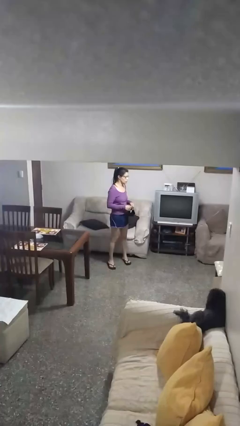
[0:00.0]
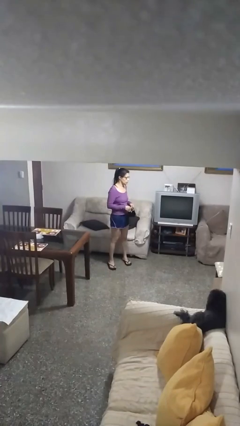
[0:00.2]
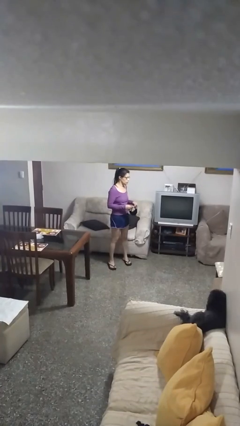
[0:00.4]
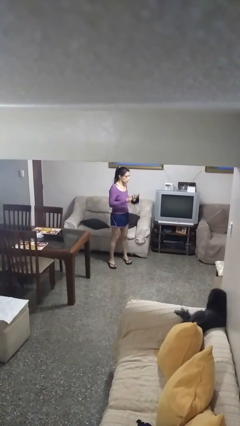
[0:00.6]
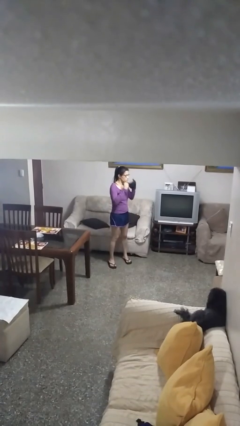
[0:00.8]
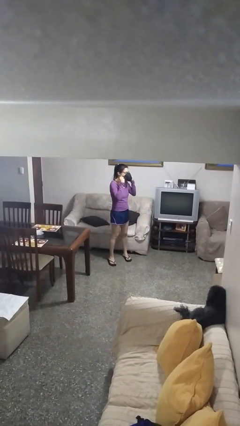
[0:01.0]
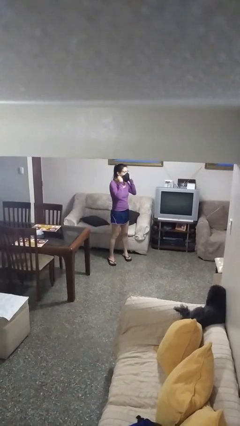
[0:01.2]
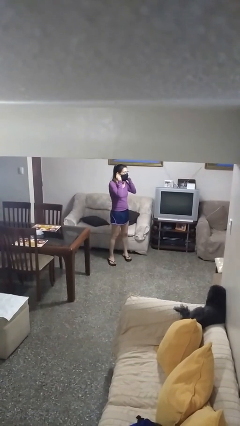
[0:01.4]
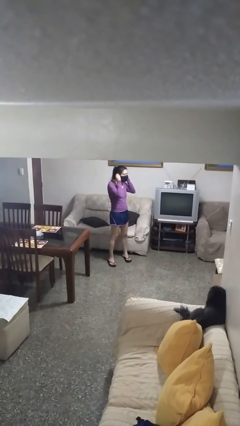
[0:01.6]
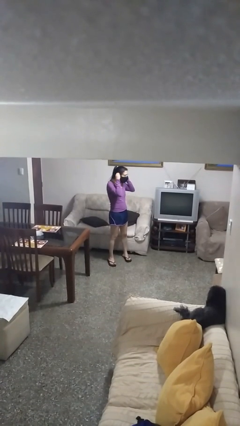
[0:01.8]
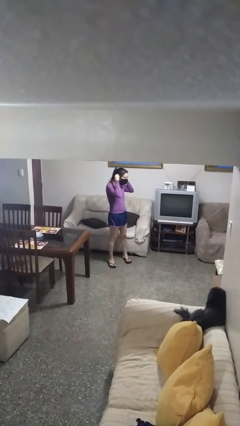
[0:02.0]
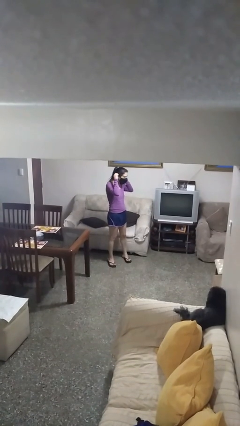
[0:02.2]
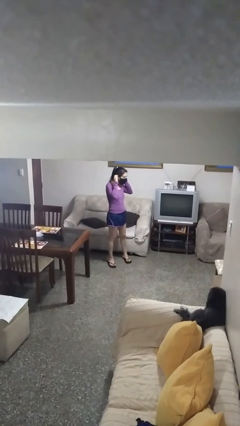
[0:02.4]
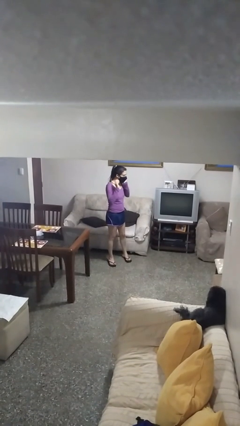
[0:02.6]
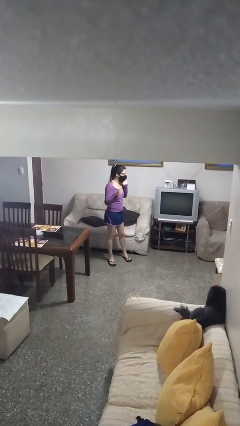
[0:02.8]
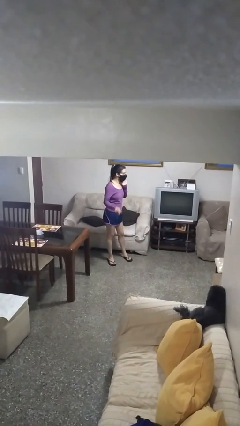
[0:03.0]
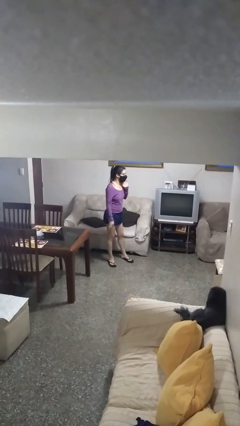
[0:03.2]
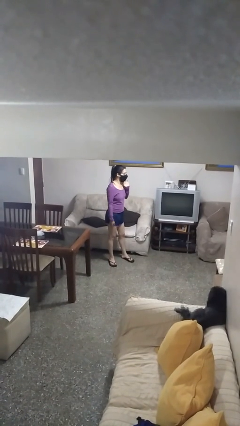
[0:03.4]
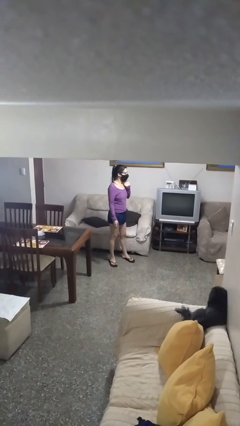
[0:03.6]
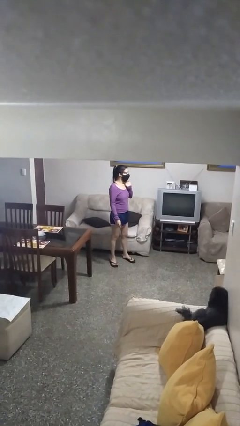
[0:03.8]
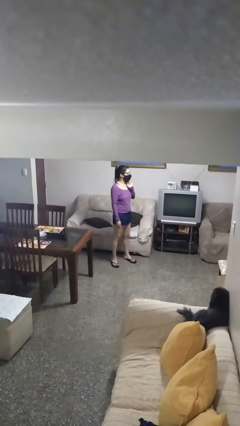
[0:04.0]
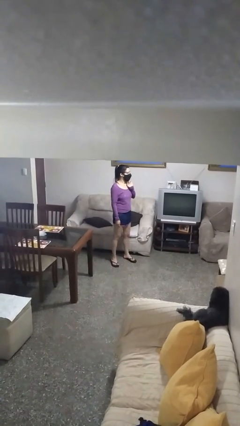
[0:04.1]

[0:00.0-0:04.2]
person puts on facemask

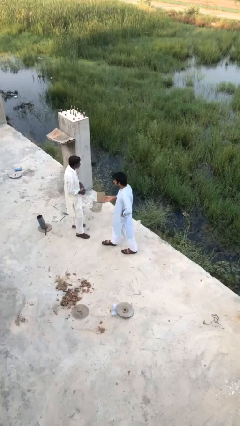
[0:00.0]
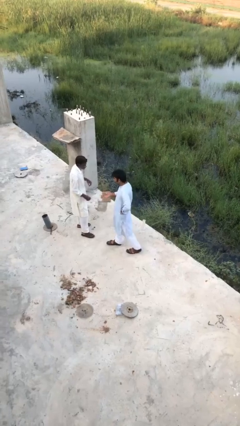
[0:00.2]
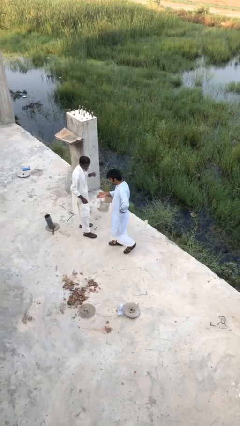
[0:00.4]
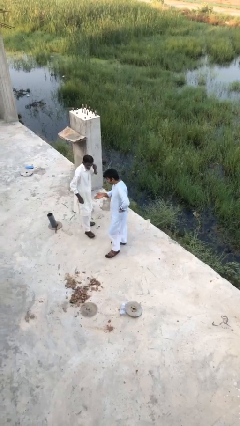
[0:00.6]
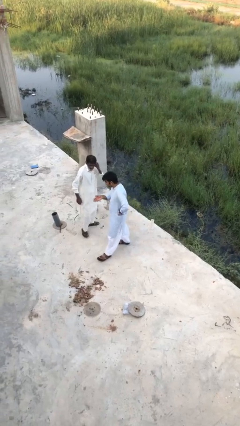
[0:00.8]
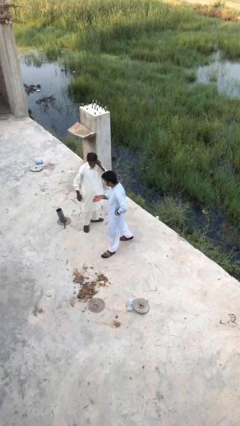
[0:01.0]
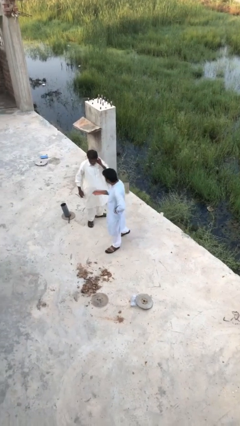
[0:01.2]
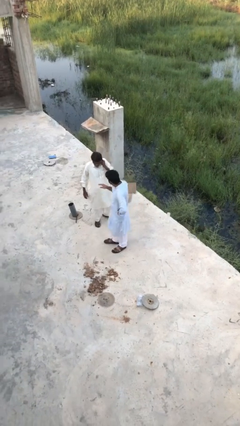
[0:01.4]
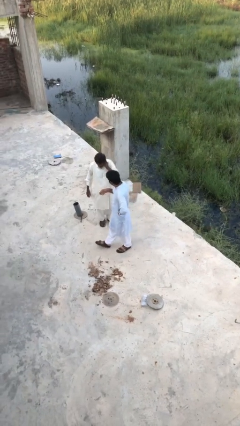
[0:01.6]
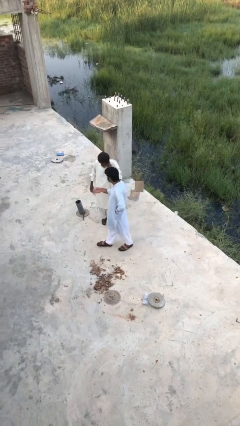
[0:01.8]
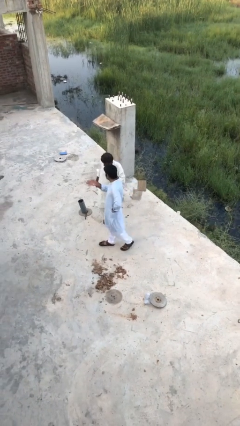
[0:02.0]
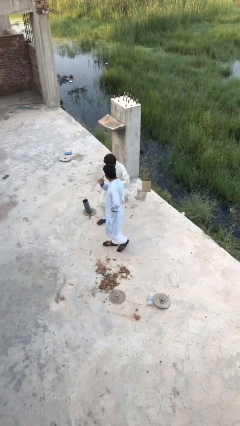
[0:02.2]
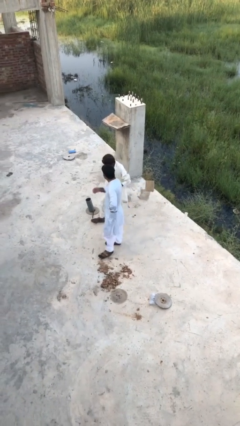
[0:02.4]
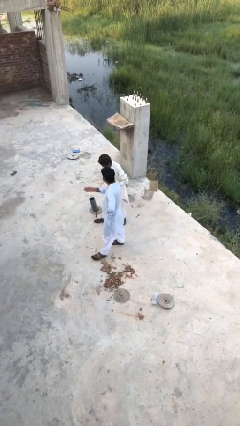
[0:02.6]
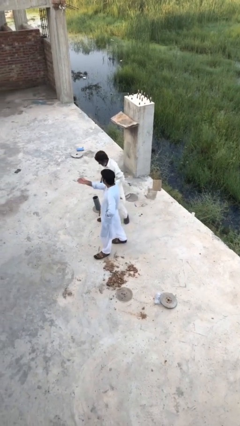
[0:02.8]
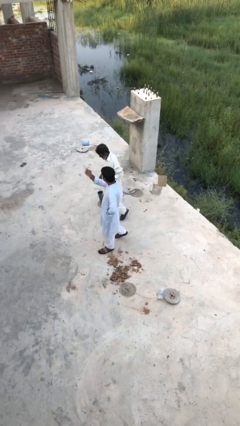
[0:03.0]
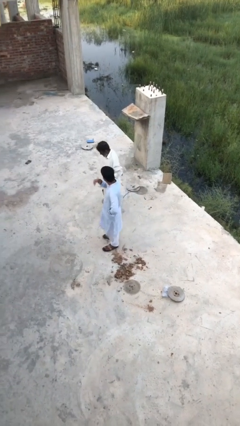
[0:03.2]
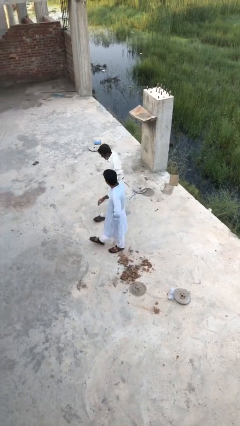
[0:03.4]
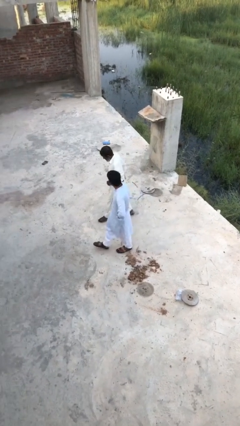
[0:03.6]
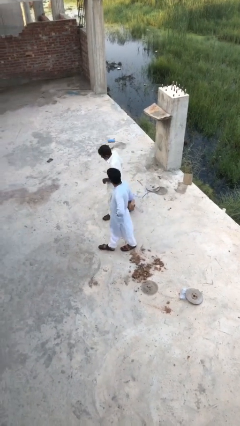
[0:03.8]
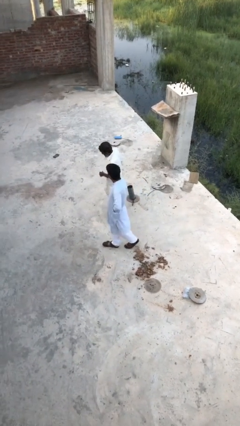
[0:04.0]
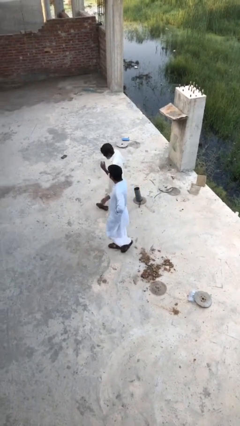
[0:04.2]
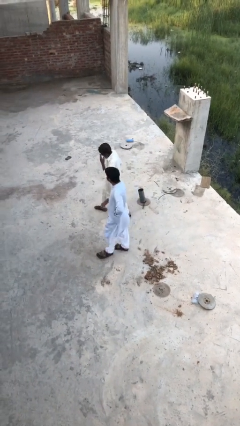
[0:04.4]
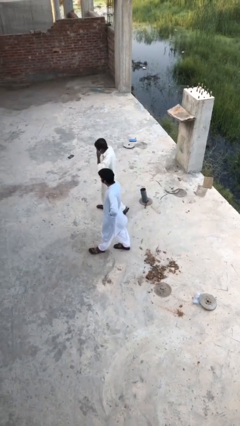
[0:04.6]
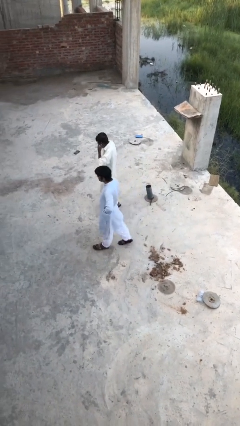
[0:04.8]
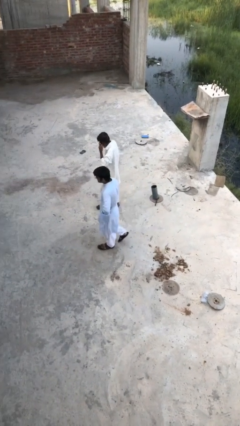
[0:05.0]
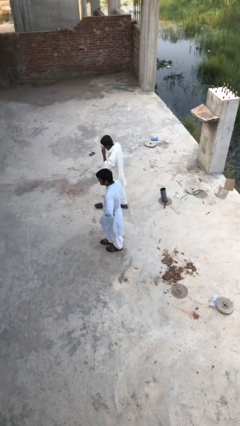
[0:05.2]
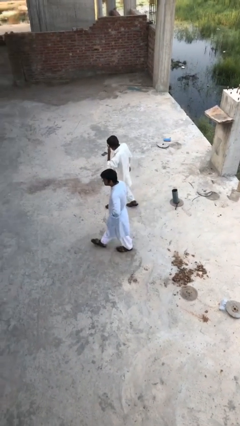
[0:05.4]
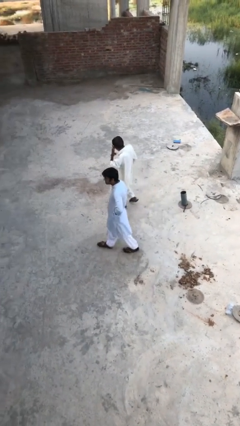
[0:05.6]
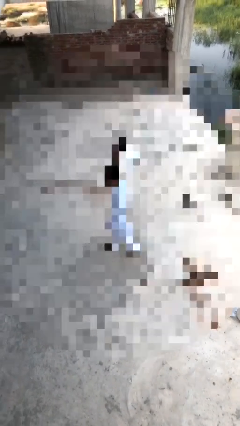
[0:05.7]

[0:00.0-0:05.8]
person talks to person

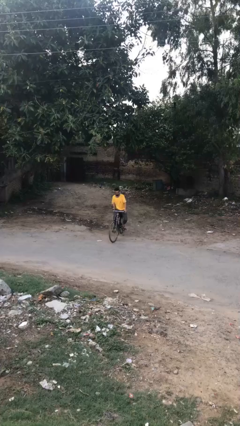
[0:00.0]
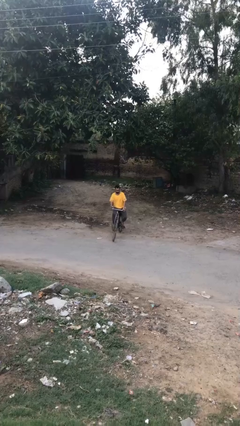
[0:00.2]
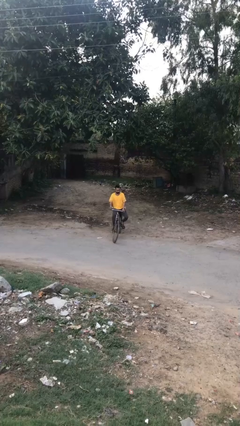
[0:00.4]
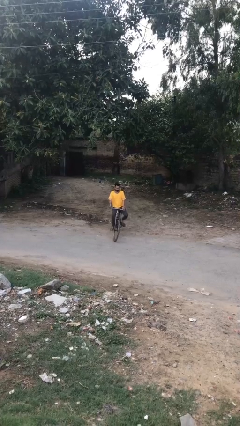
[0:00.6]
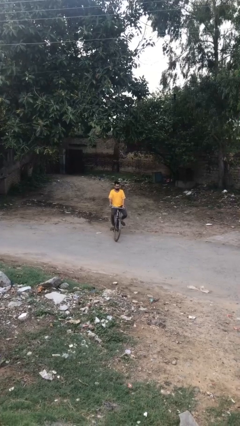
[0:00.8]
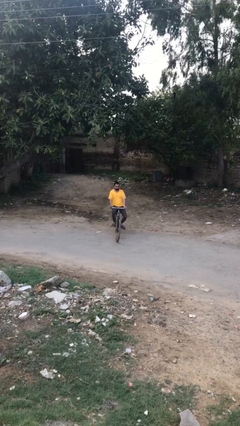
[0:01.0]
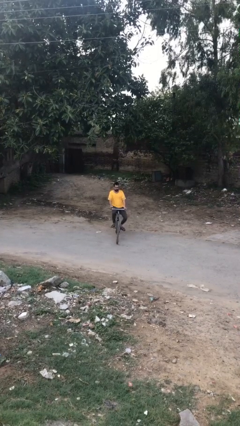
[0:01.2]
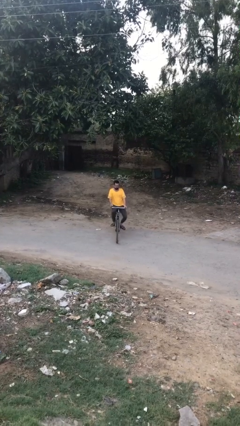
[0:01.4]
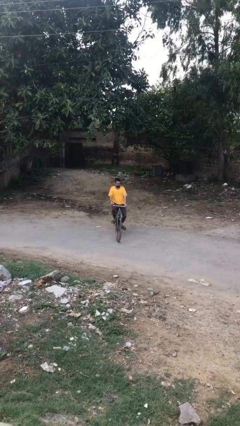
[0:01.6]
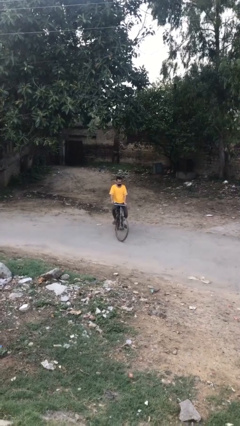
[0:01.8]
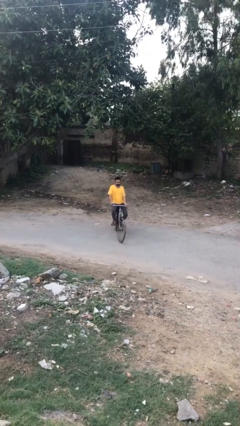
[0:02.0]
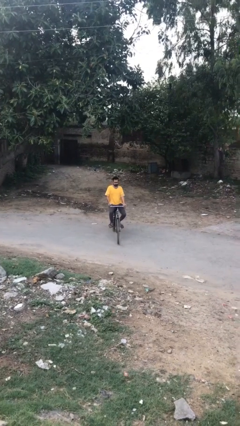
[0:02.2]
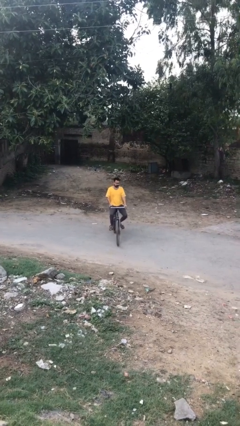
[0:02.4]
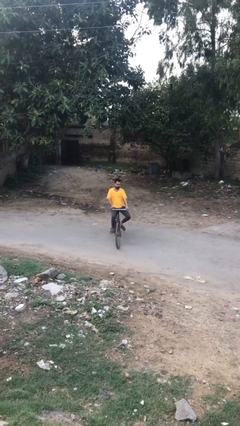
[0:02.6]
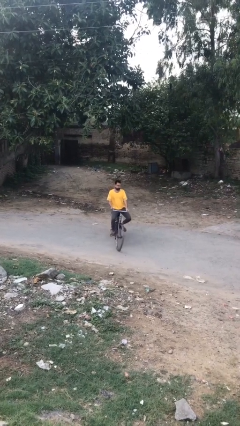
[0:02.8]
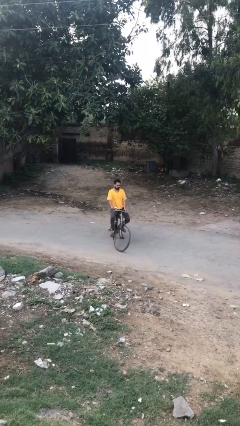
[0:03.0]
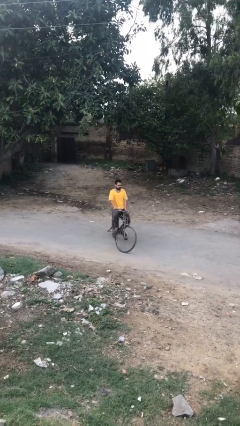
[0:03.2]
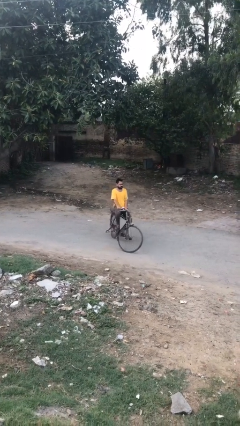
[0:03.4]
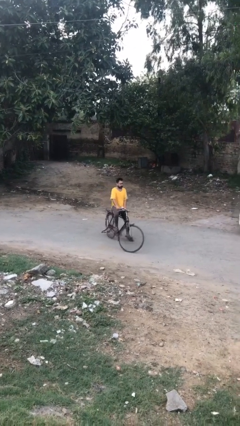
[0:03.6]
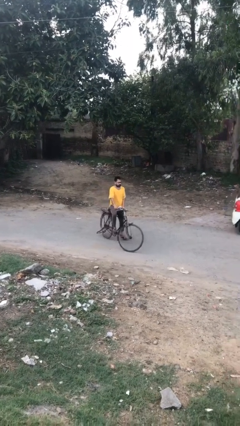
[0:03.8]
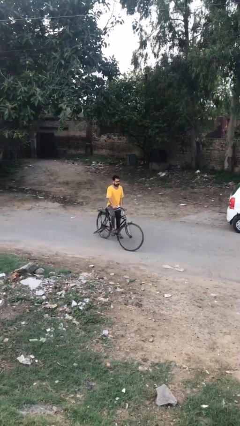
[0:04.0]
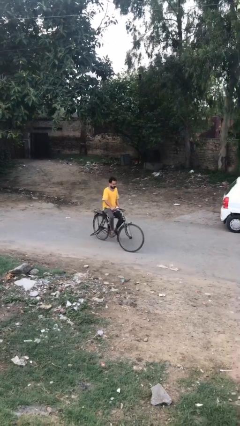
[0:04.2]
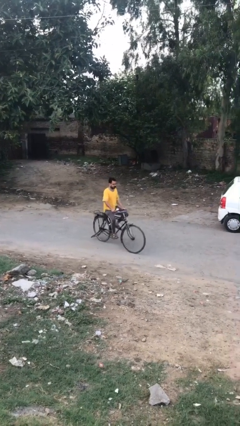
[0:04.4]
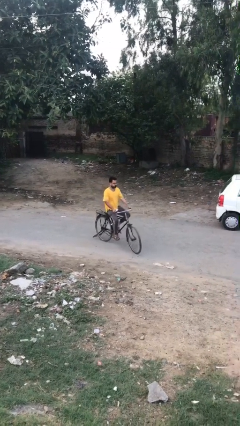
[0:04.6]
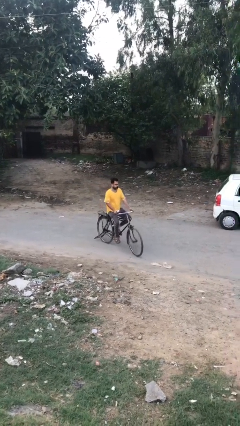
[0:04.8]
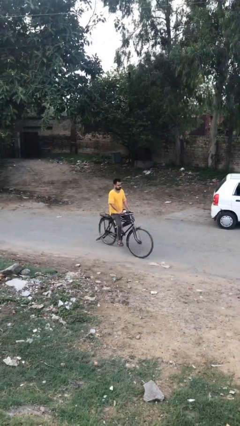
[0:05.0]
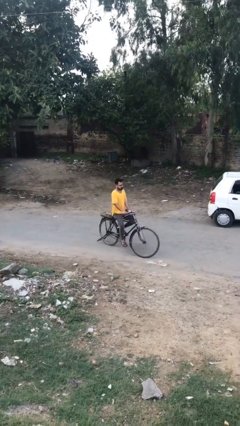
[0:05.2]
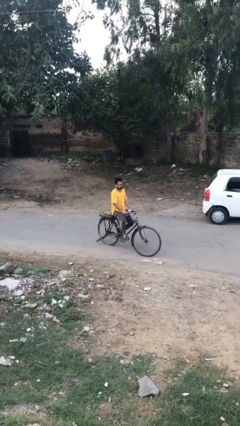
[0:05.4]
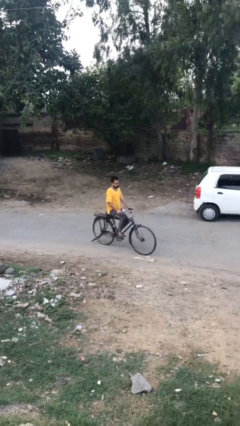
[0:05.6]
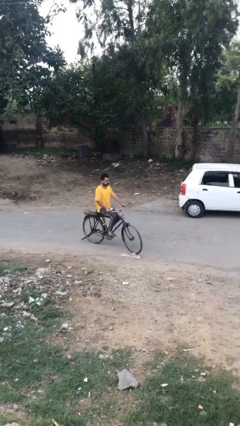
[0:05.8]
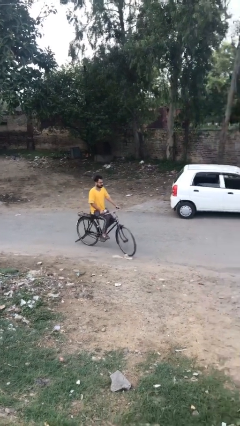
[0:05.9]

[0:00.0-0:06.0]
person rides bicycle

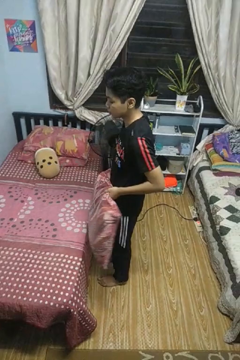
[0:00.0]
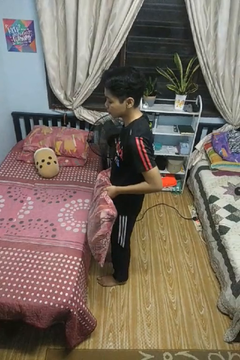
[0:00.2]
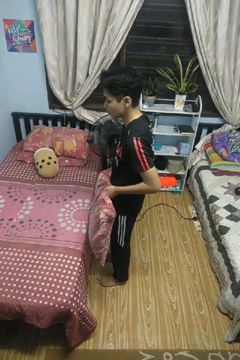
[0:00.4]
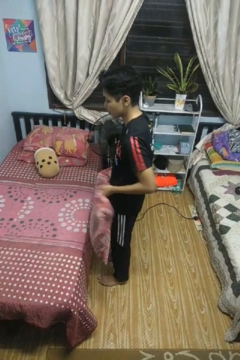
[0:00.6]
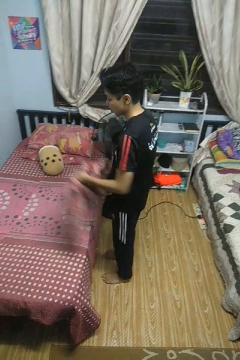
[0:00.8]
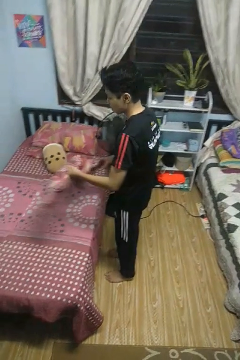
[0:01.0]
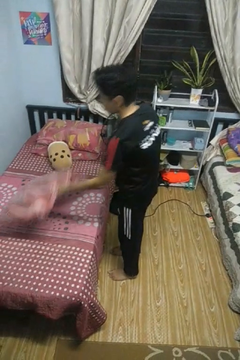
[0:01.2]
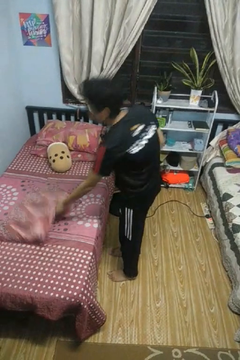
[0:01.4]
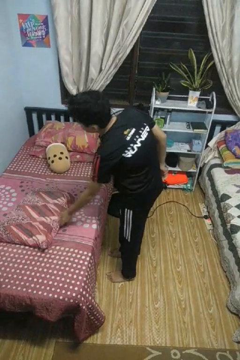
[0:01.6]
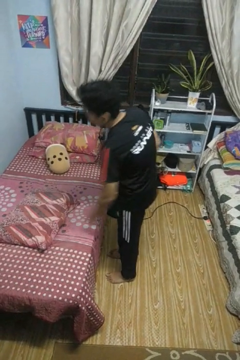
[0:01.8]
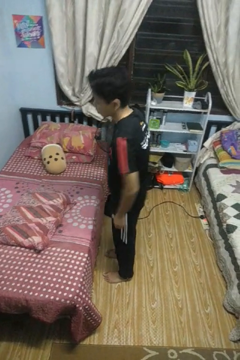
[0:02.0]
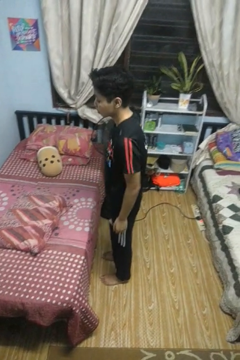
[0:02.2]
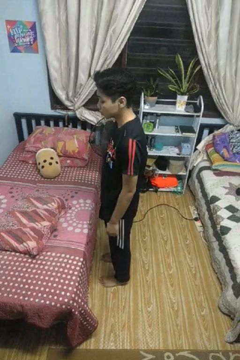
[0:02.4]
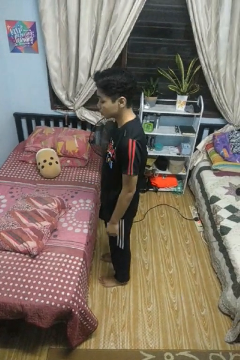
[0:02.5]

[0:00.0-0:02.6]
person puts down object on bed
